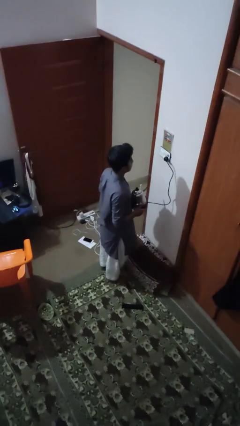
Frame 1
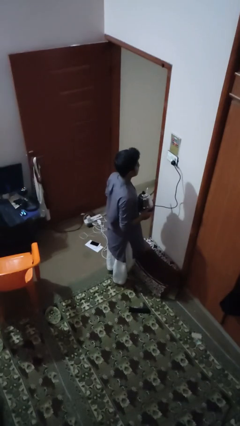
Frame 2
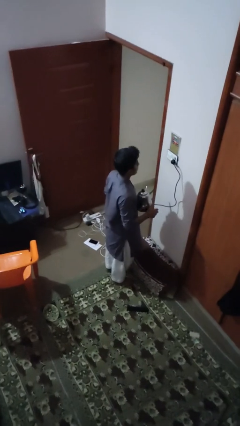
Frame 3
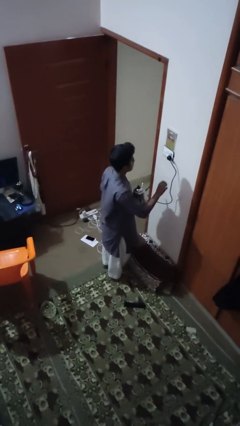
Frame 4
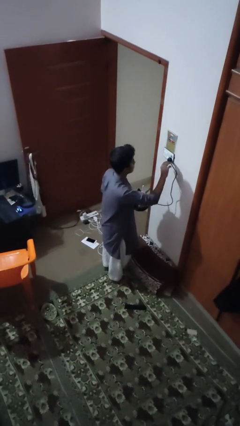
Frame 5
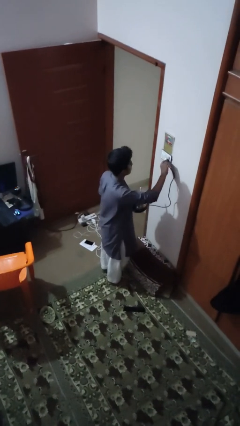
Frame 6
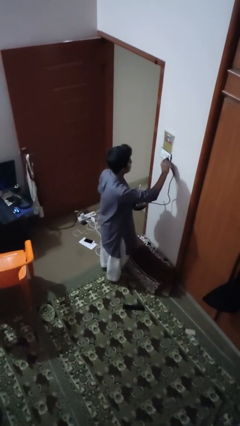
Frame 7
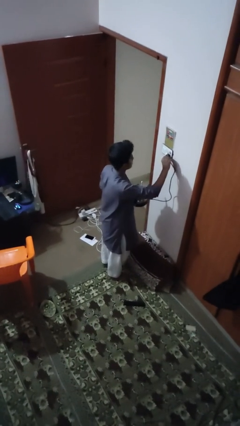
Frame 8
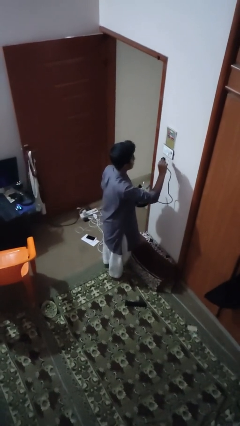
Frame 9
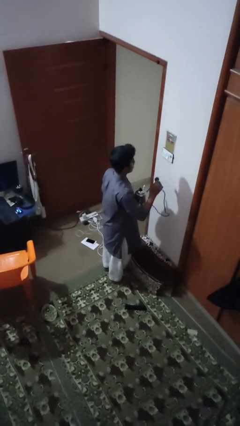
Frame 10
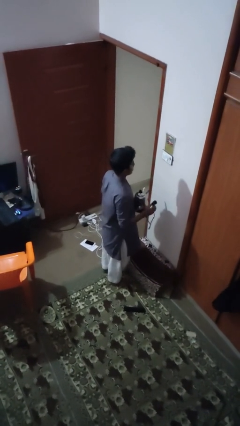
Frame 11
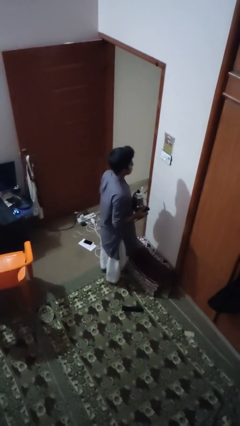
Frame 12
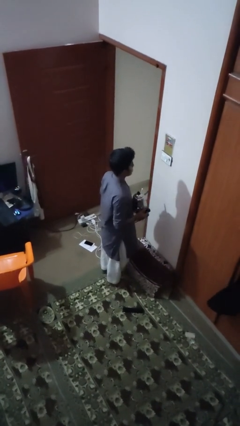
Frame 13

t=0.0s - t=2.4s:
person unplugs from electrical socket

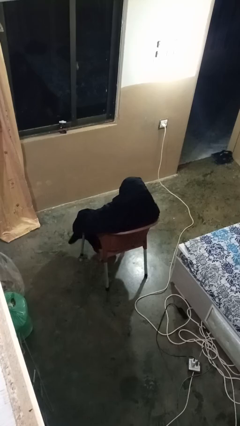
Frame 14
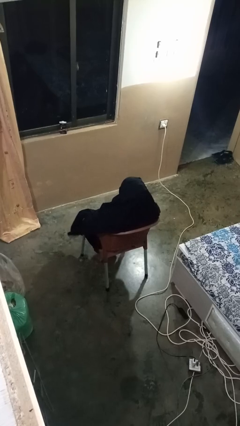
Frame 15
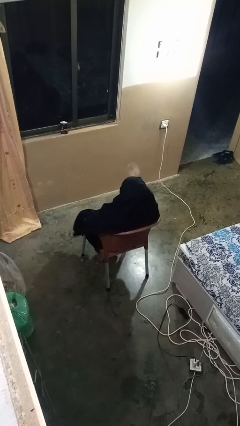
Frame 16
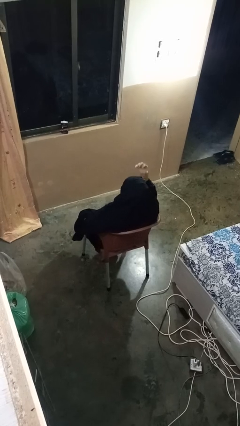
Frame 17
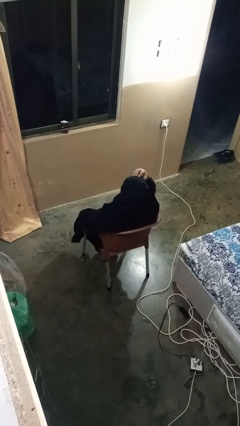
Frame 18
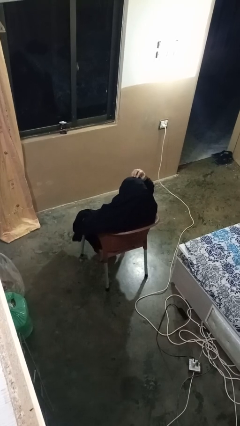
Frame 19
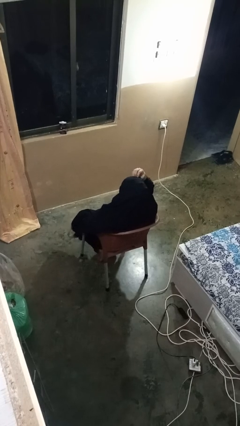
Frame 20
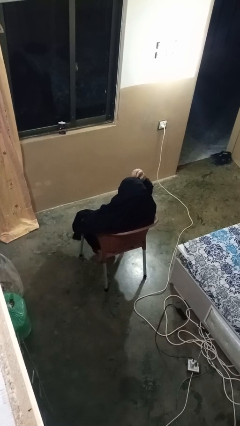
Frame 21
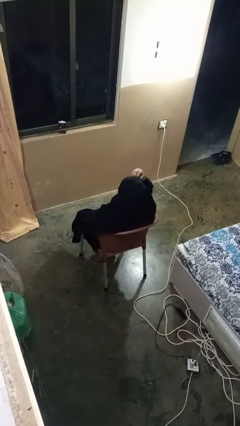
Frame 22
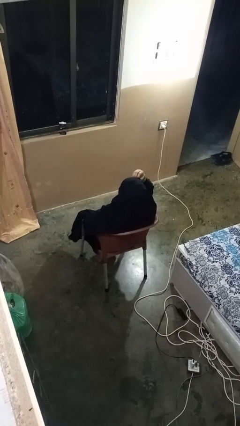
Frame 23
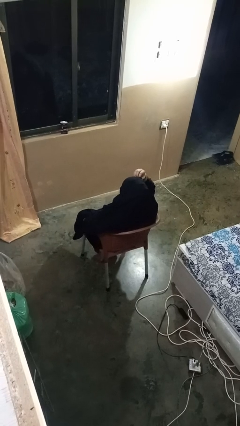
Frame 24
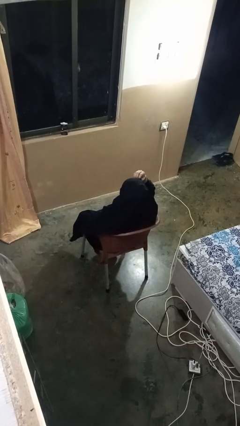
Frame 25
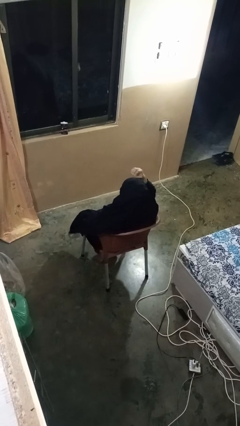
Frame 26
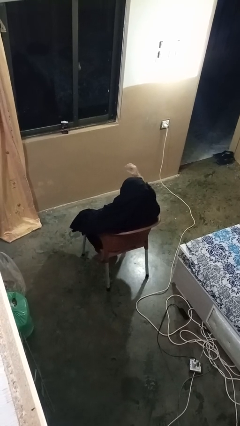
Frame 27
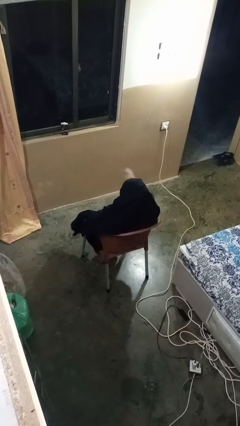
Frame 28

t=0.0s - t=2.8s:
person scratches face

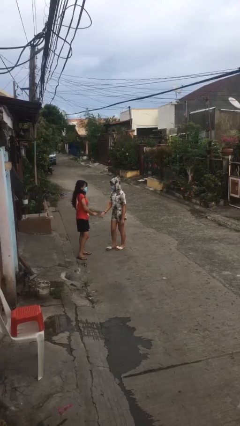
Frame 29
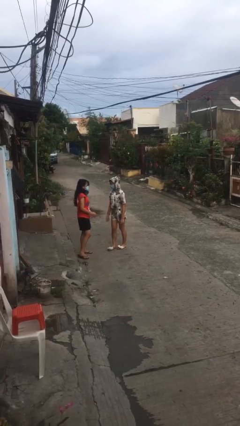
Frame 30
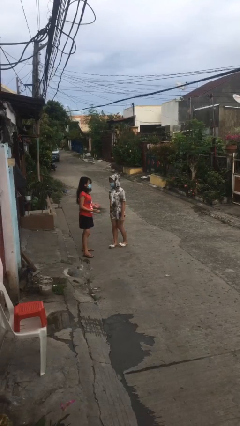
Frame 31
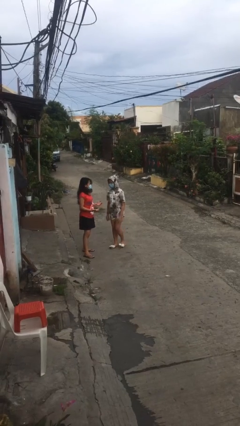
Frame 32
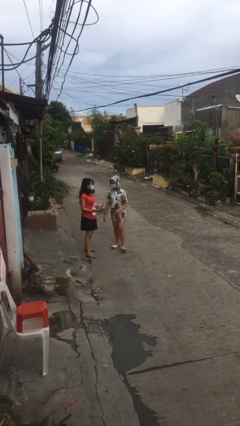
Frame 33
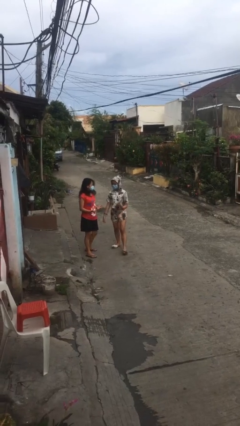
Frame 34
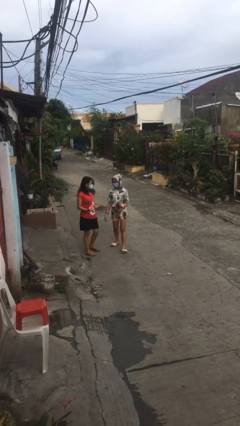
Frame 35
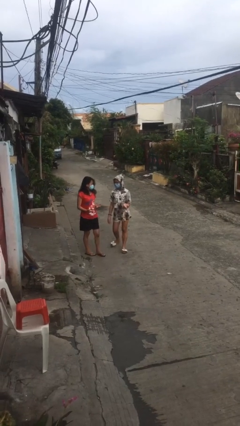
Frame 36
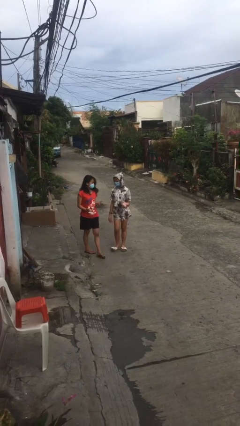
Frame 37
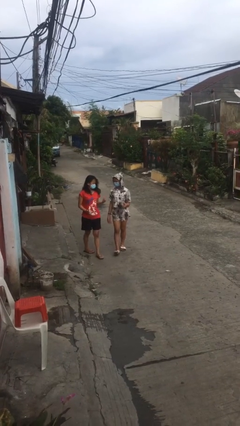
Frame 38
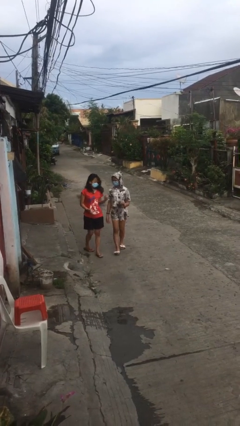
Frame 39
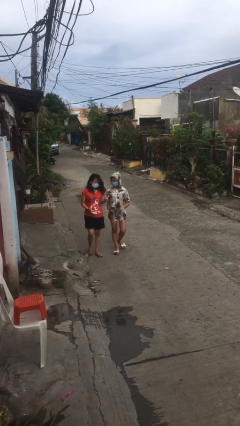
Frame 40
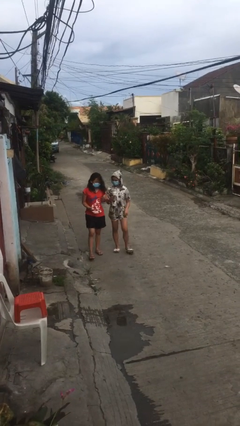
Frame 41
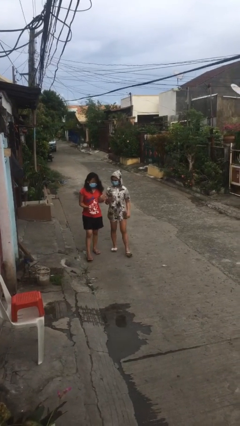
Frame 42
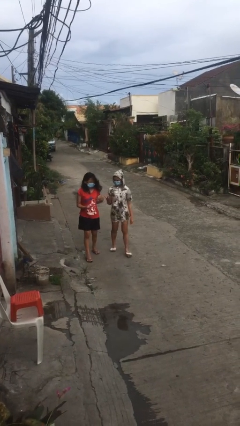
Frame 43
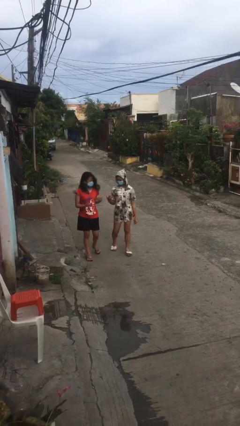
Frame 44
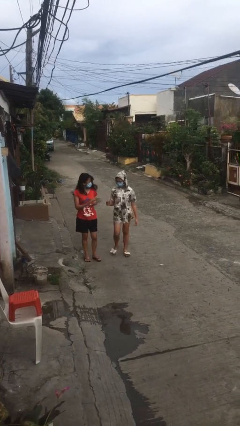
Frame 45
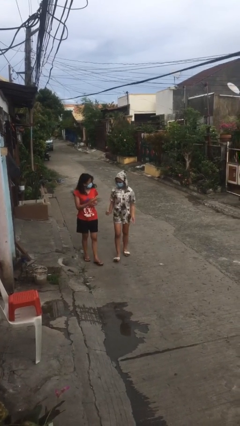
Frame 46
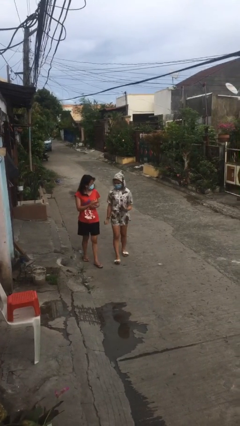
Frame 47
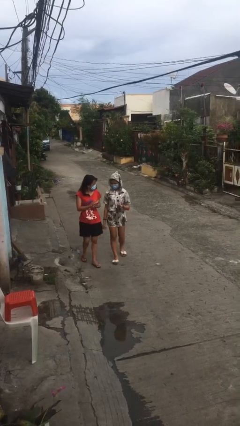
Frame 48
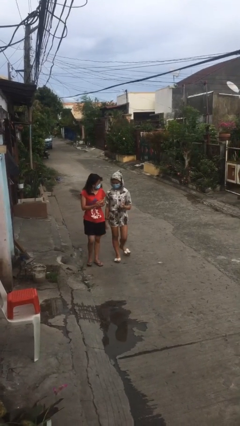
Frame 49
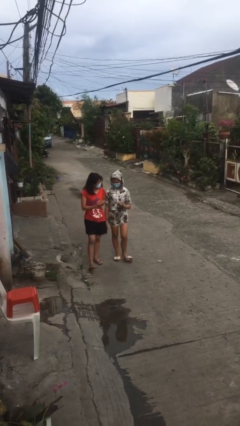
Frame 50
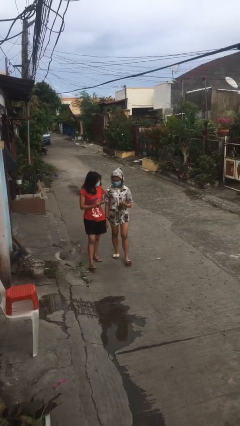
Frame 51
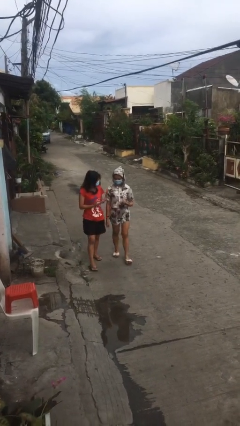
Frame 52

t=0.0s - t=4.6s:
person talks to person

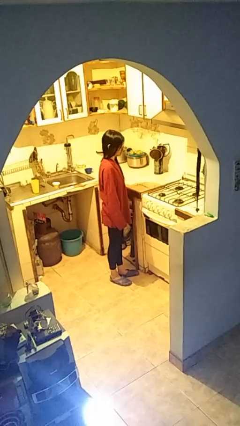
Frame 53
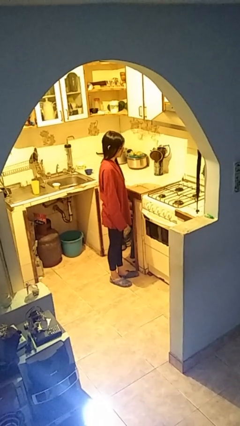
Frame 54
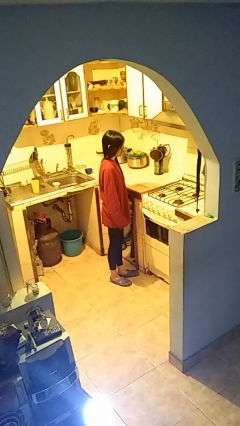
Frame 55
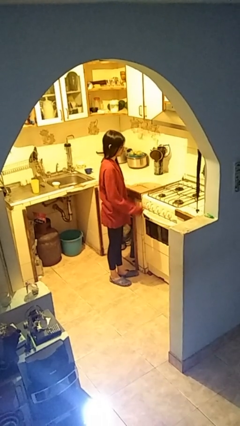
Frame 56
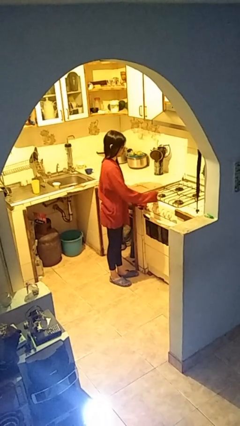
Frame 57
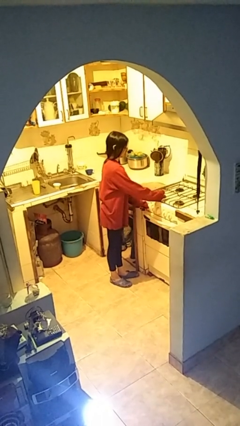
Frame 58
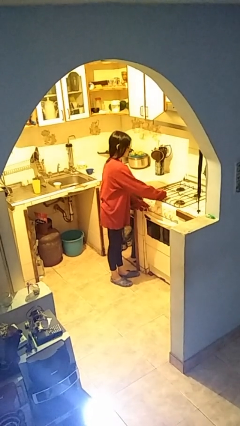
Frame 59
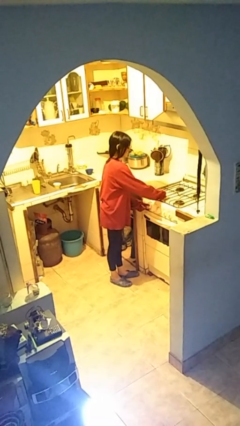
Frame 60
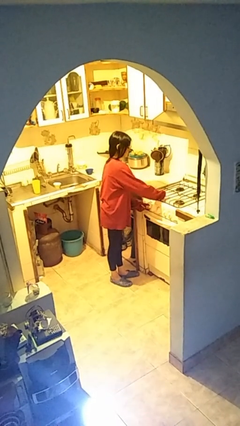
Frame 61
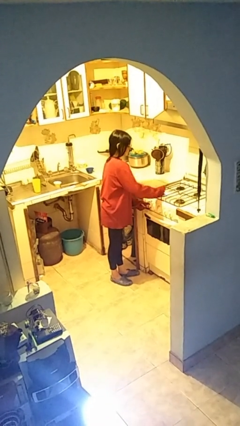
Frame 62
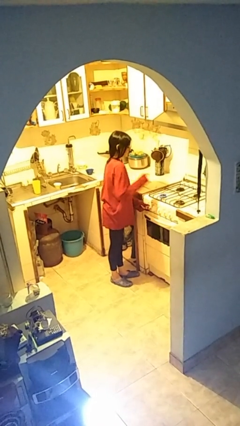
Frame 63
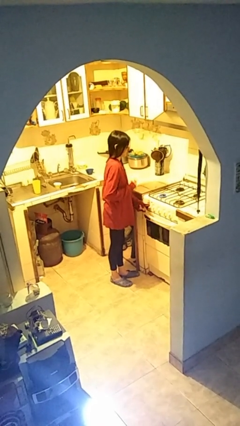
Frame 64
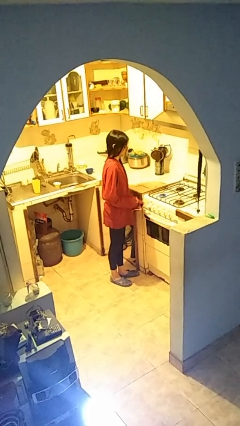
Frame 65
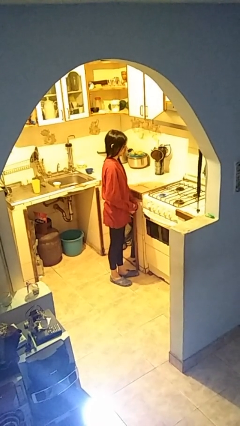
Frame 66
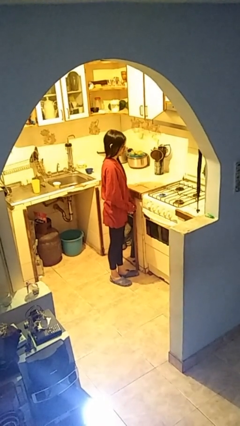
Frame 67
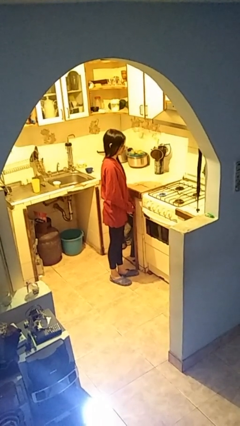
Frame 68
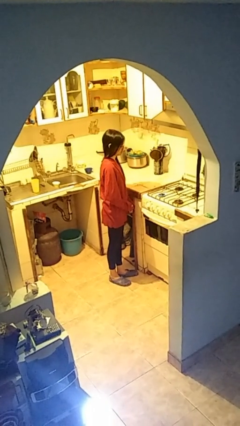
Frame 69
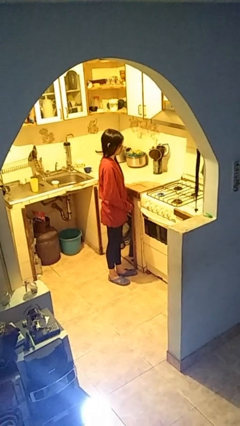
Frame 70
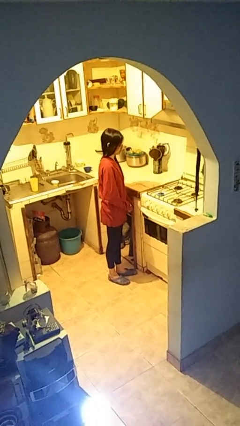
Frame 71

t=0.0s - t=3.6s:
person turns on stovetop

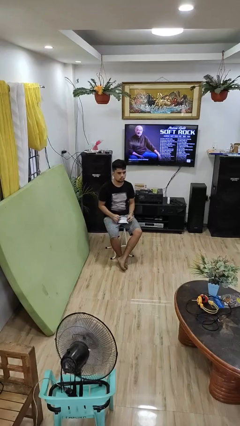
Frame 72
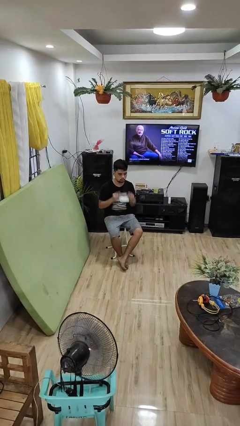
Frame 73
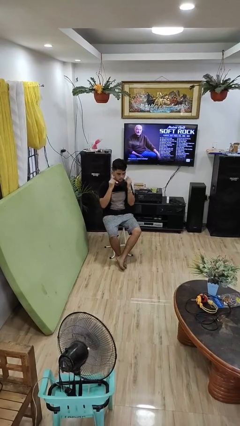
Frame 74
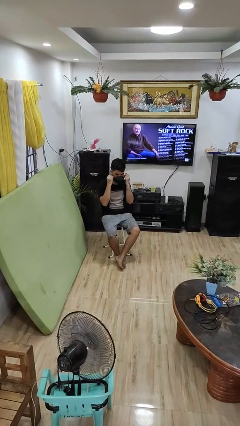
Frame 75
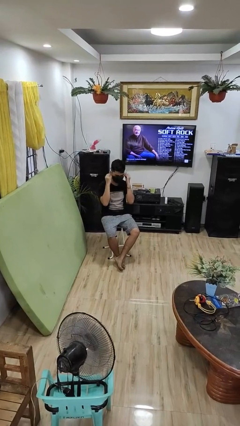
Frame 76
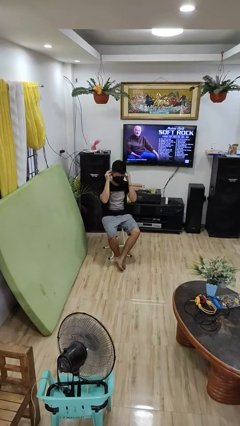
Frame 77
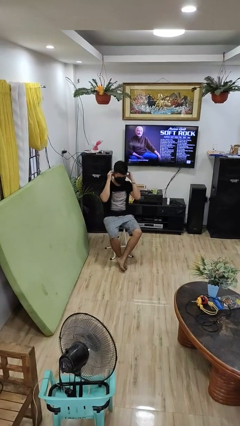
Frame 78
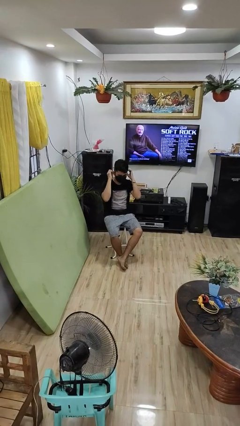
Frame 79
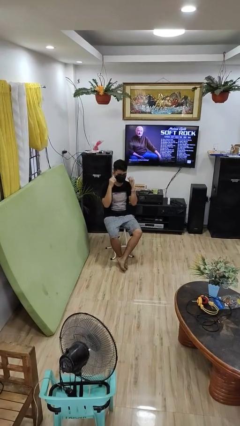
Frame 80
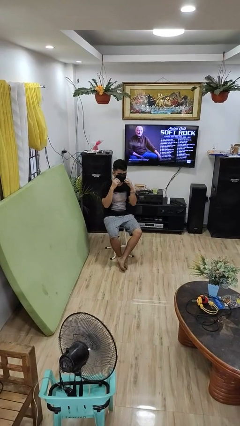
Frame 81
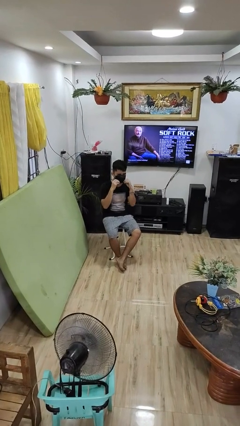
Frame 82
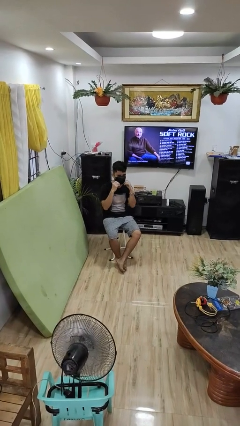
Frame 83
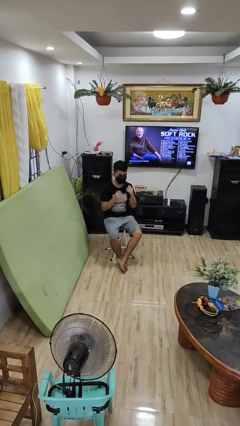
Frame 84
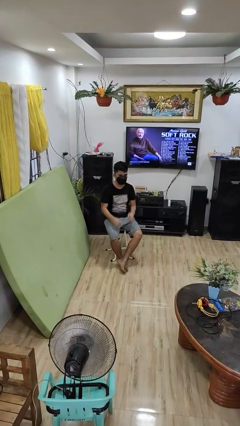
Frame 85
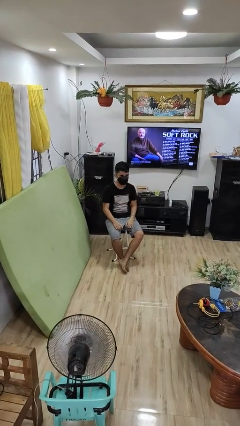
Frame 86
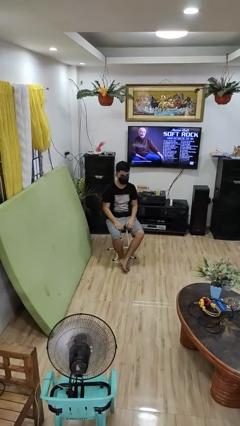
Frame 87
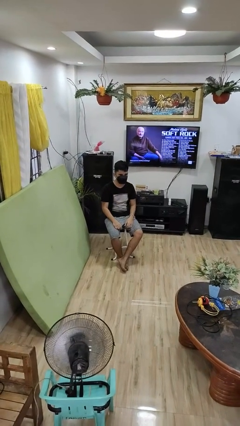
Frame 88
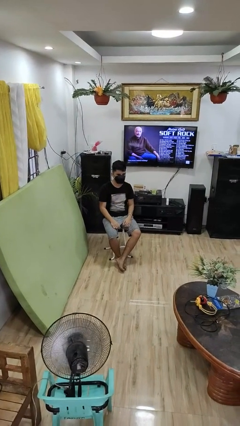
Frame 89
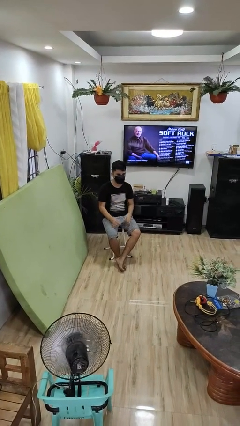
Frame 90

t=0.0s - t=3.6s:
person puts on facemask

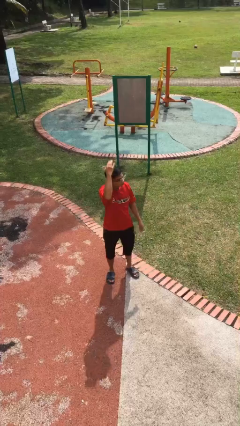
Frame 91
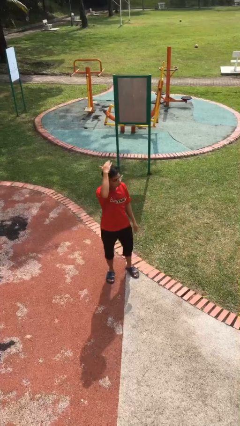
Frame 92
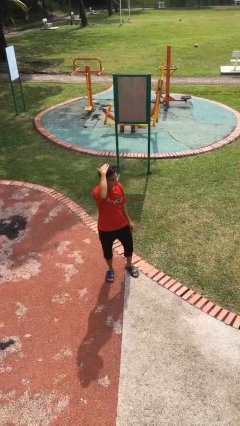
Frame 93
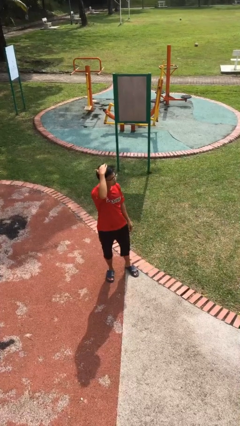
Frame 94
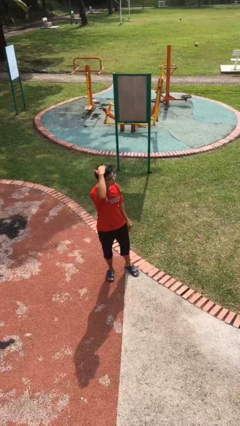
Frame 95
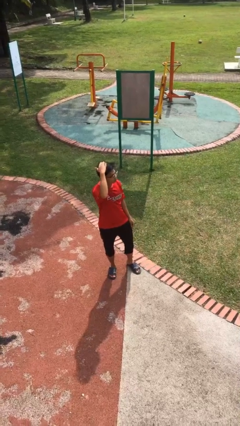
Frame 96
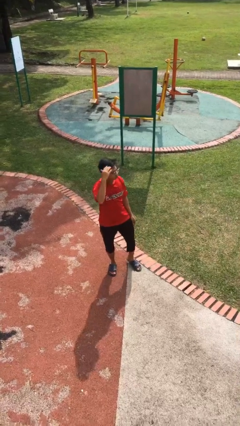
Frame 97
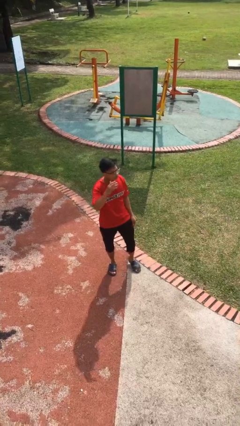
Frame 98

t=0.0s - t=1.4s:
person pats head
